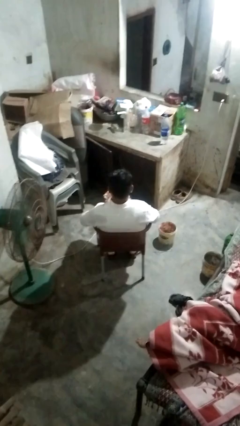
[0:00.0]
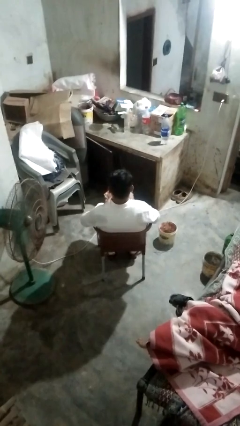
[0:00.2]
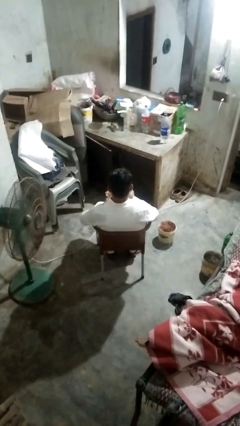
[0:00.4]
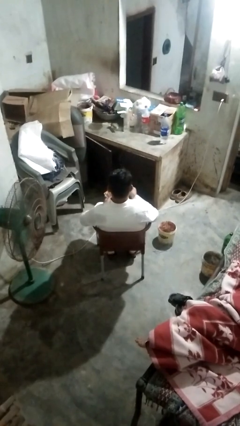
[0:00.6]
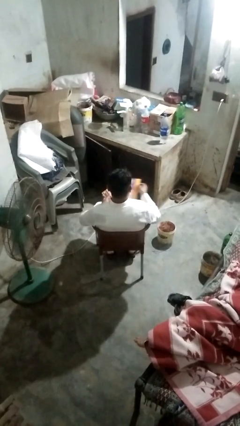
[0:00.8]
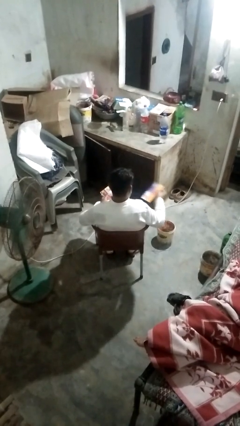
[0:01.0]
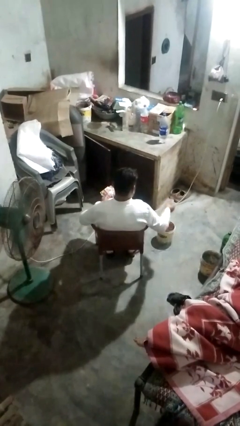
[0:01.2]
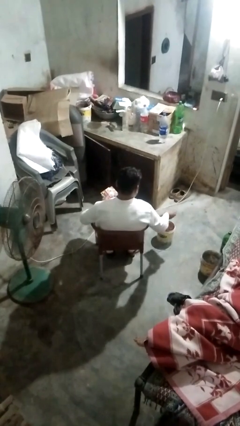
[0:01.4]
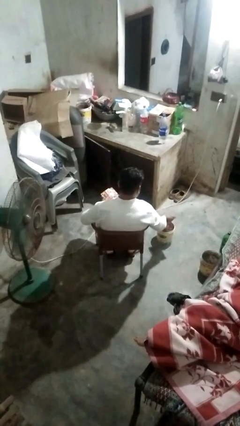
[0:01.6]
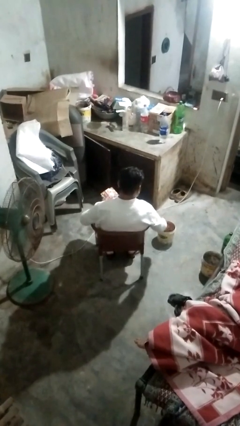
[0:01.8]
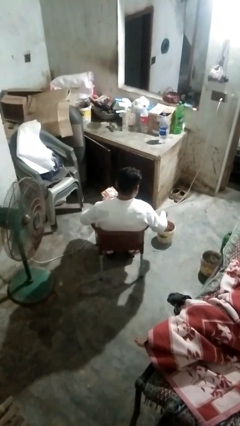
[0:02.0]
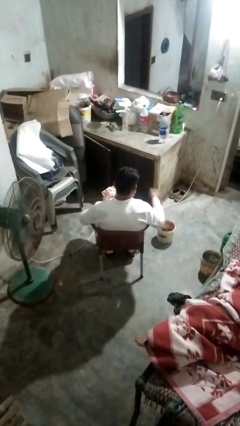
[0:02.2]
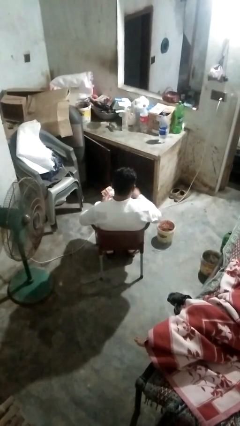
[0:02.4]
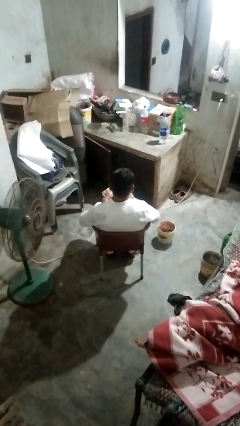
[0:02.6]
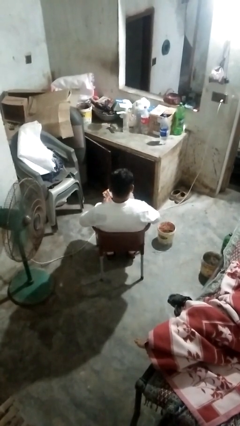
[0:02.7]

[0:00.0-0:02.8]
person discards trash

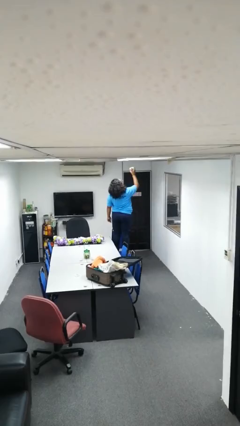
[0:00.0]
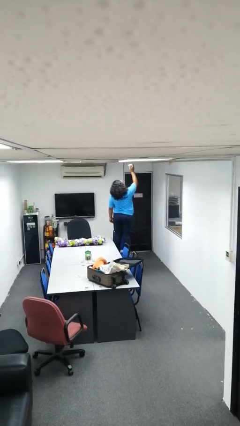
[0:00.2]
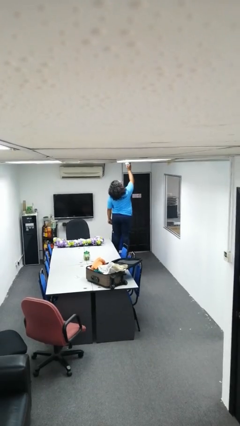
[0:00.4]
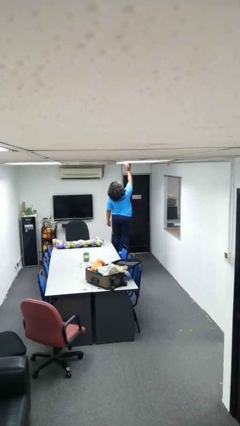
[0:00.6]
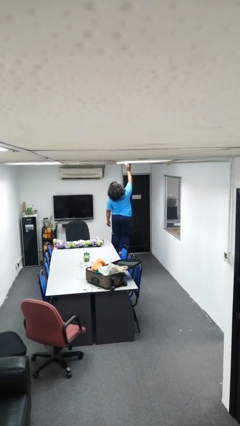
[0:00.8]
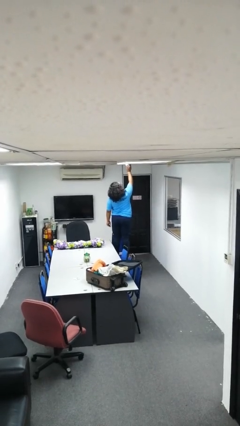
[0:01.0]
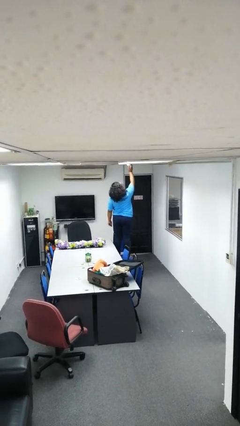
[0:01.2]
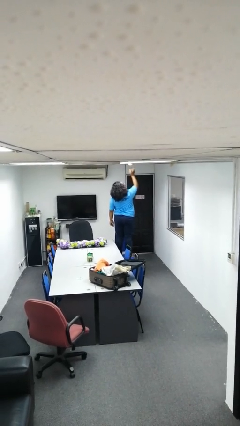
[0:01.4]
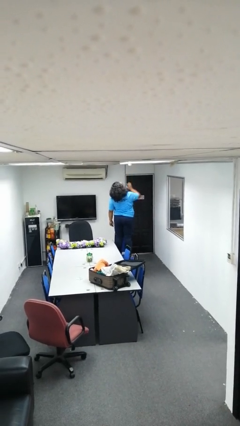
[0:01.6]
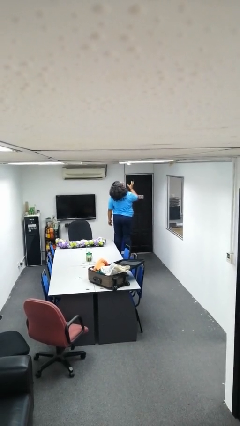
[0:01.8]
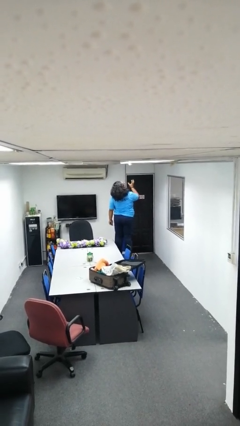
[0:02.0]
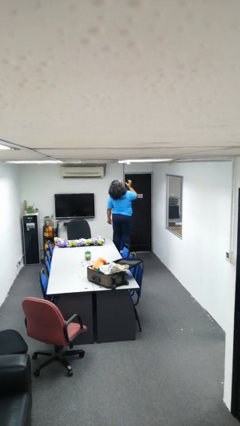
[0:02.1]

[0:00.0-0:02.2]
person puts up smoke detector

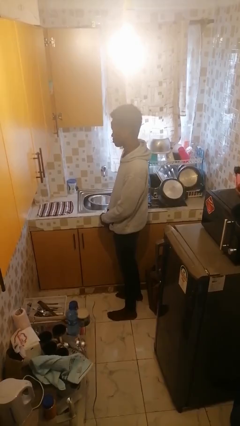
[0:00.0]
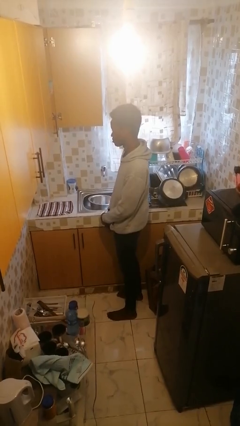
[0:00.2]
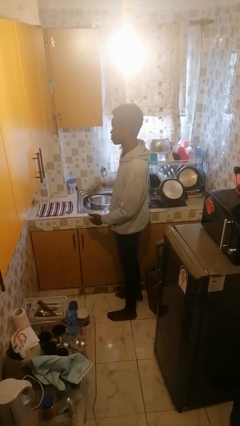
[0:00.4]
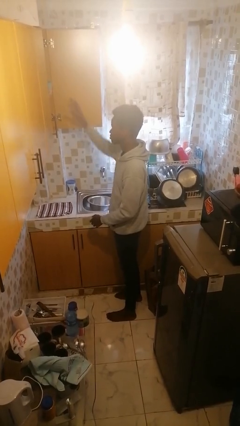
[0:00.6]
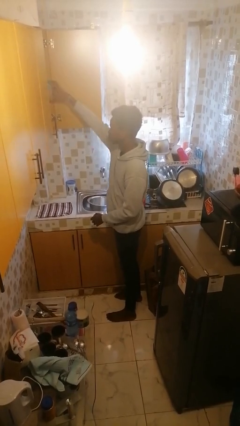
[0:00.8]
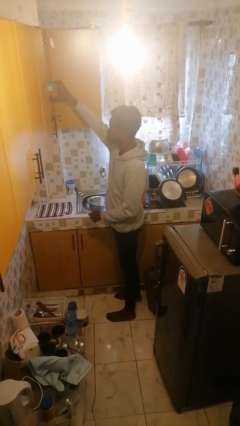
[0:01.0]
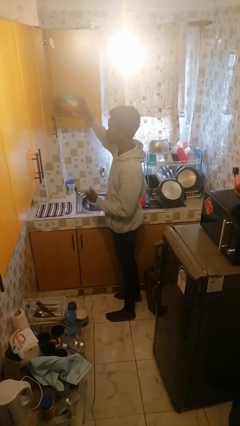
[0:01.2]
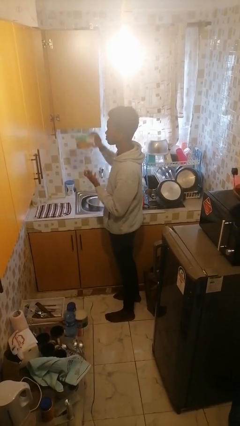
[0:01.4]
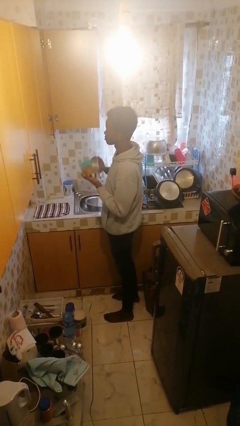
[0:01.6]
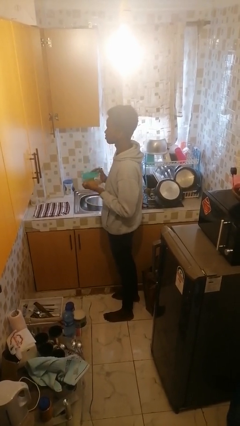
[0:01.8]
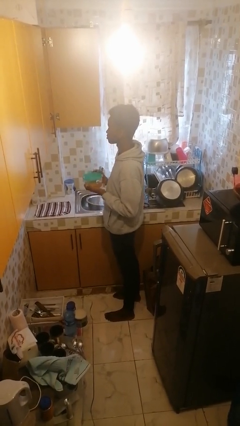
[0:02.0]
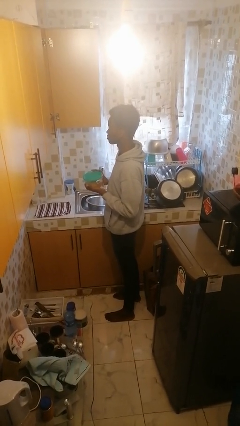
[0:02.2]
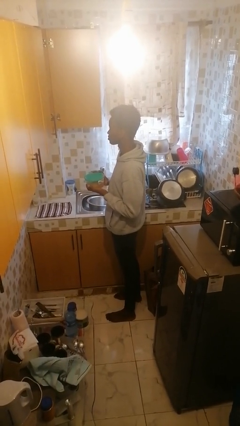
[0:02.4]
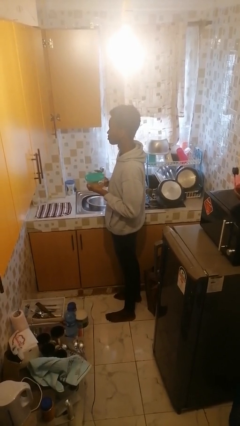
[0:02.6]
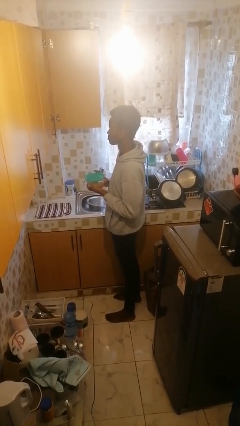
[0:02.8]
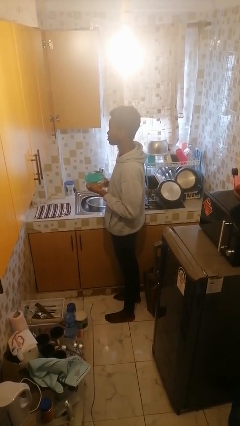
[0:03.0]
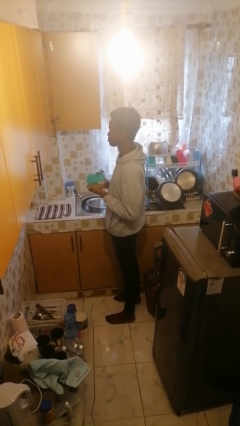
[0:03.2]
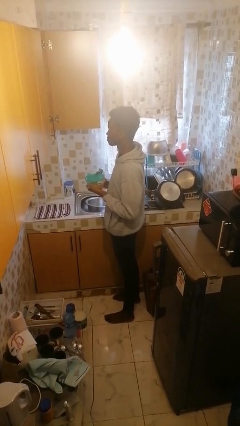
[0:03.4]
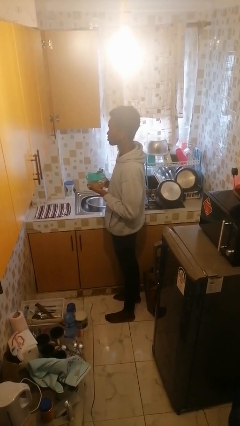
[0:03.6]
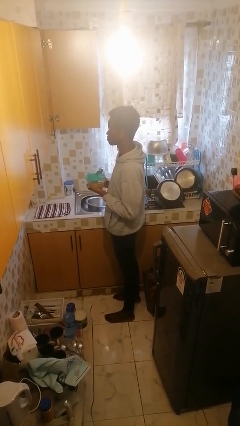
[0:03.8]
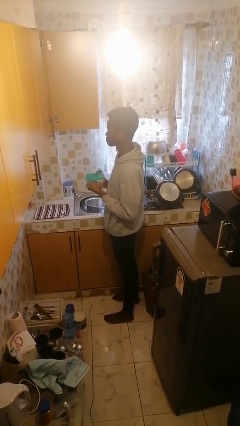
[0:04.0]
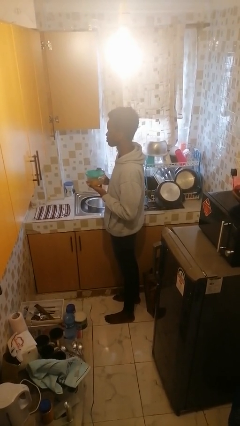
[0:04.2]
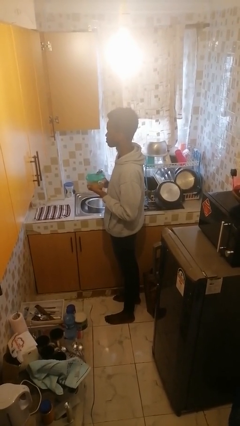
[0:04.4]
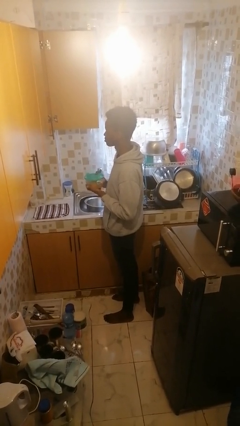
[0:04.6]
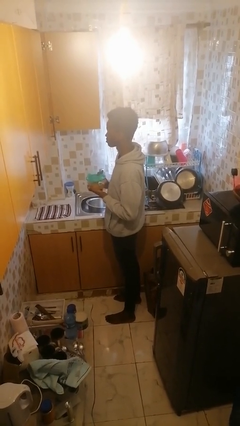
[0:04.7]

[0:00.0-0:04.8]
person picks up object from cabinet

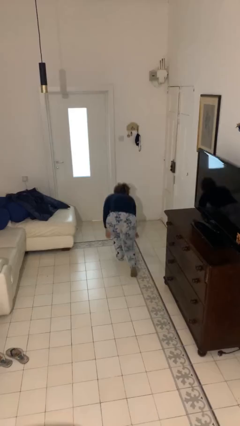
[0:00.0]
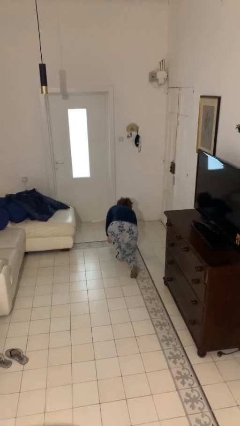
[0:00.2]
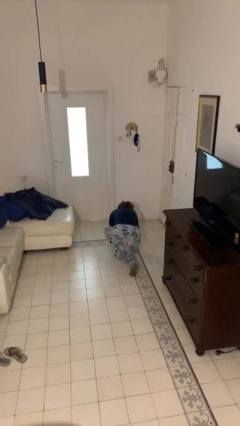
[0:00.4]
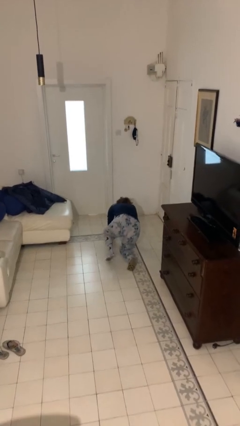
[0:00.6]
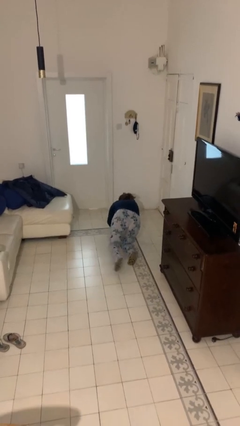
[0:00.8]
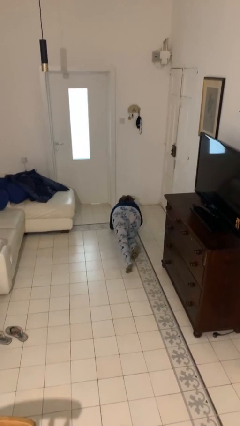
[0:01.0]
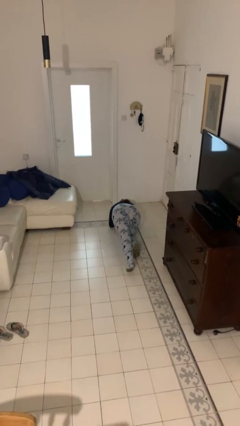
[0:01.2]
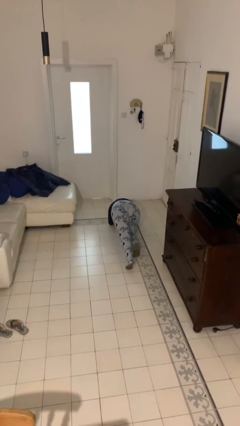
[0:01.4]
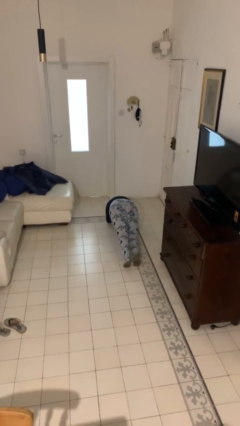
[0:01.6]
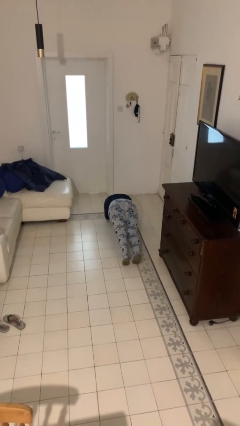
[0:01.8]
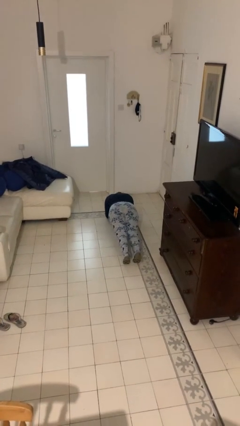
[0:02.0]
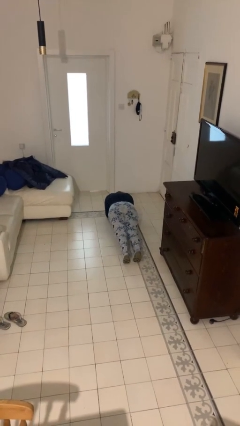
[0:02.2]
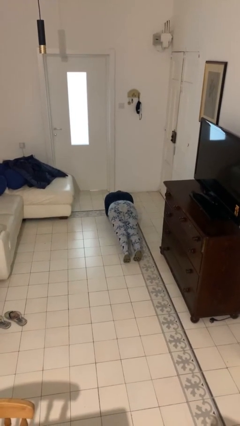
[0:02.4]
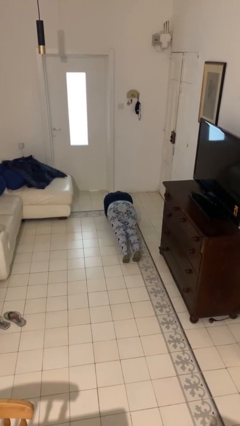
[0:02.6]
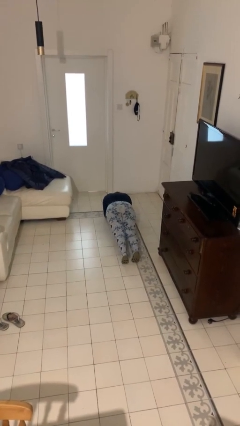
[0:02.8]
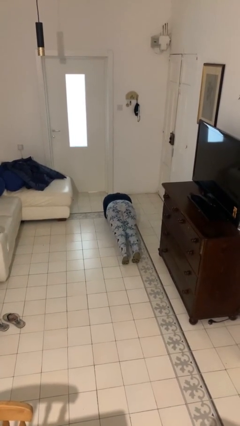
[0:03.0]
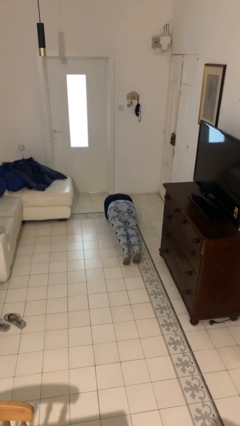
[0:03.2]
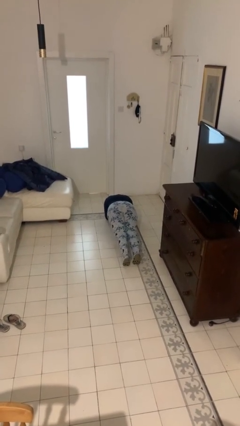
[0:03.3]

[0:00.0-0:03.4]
person exercises with plank

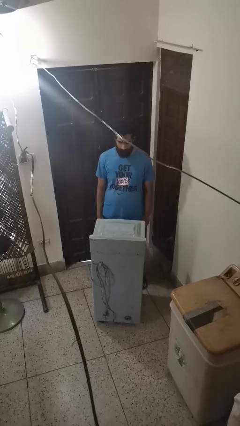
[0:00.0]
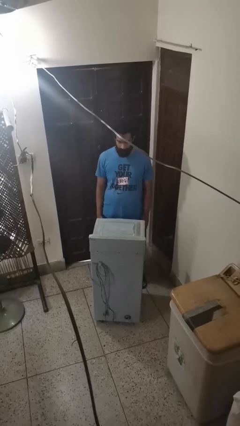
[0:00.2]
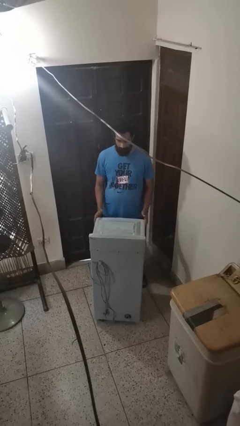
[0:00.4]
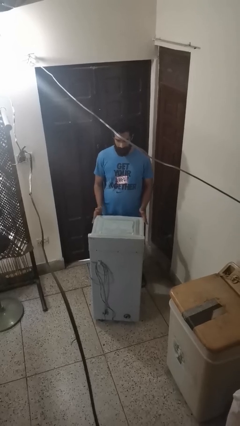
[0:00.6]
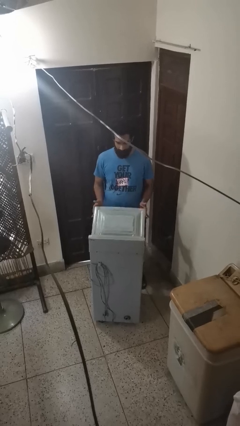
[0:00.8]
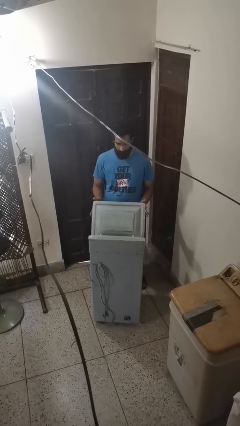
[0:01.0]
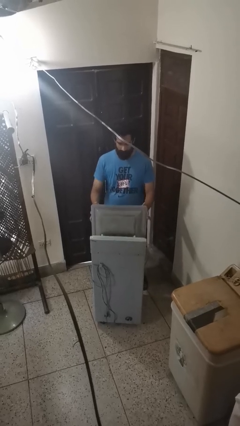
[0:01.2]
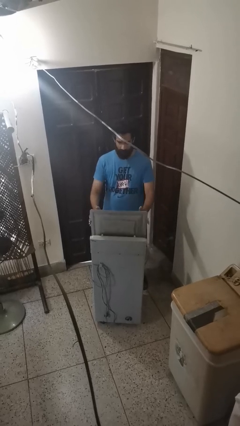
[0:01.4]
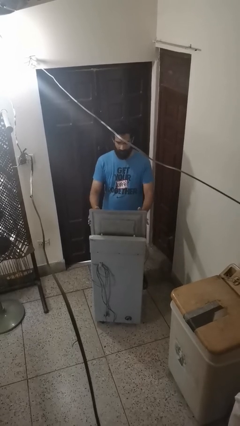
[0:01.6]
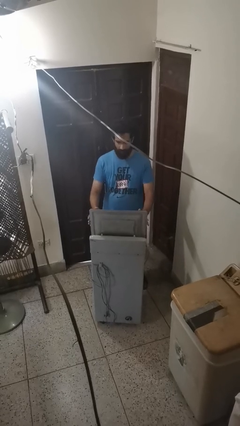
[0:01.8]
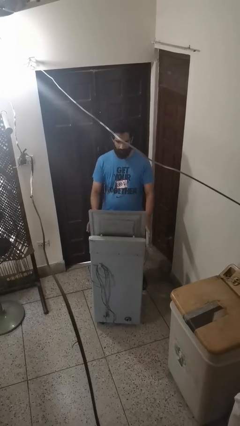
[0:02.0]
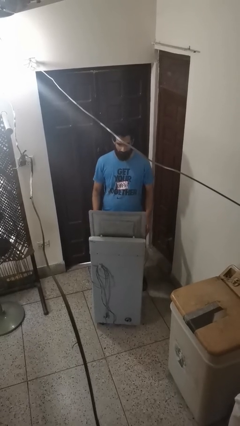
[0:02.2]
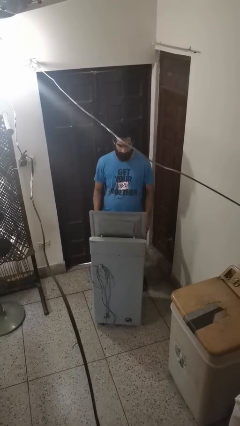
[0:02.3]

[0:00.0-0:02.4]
person opens clothes washer

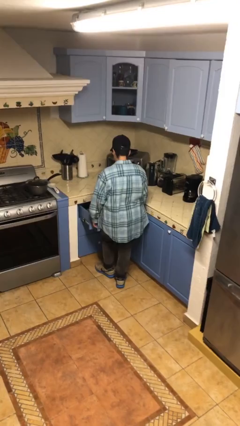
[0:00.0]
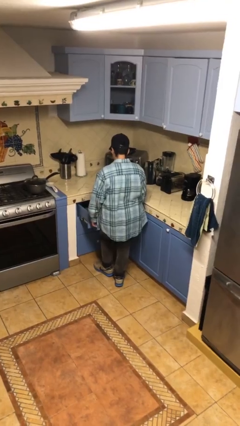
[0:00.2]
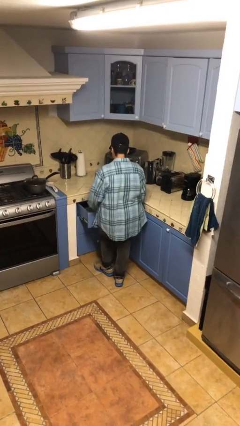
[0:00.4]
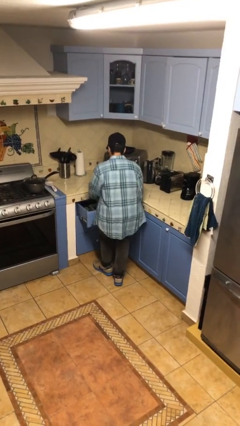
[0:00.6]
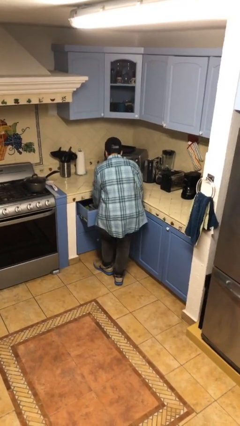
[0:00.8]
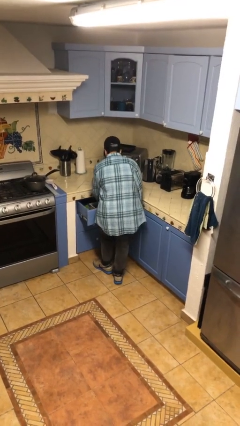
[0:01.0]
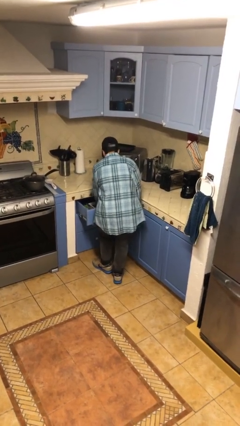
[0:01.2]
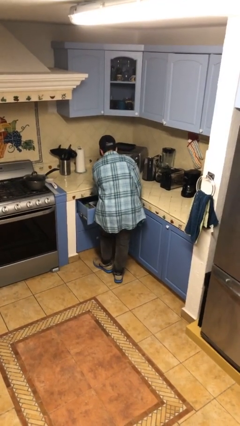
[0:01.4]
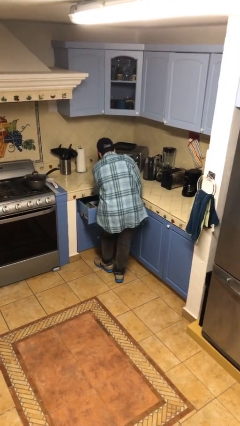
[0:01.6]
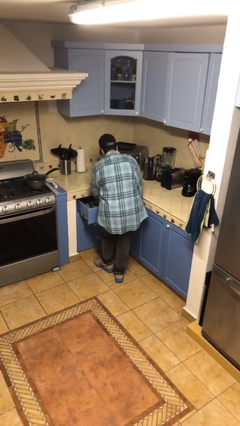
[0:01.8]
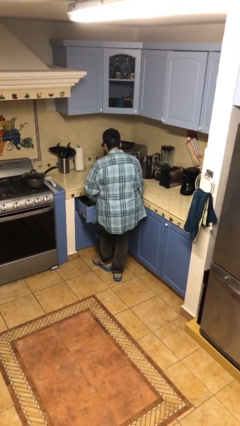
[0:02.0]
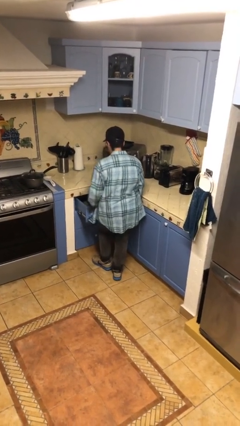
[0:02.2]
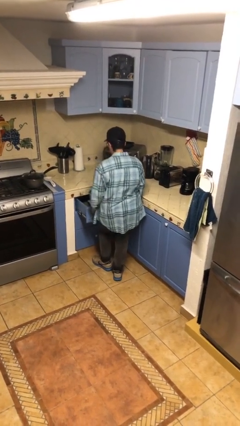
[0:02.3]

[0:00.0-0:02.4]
person searches in kitchen drawer
